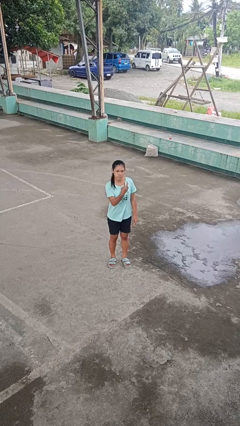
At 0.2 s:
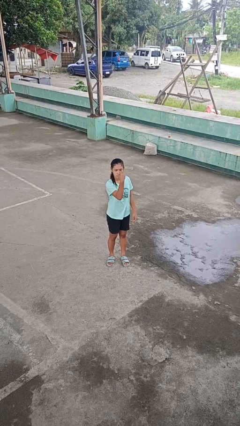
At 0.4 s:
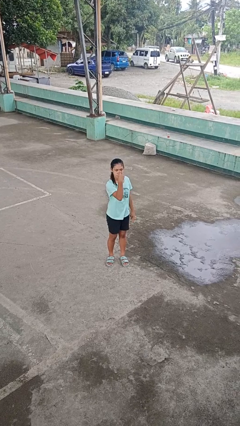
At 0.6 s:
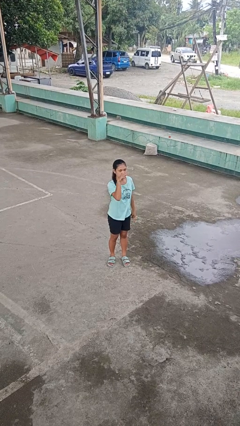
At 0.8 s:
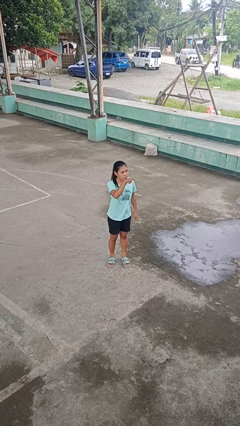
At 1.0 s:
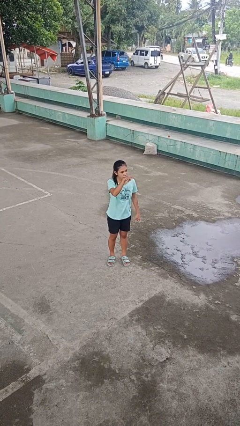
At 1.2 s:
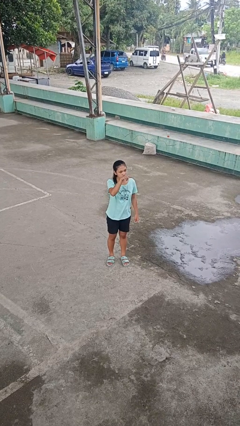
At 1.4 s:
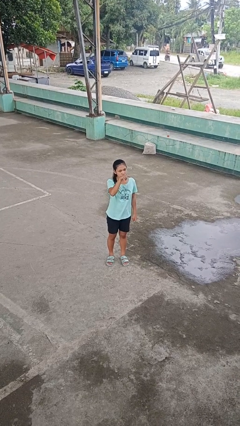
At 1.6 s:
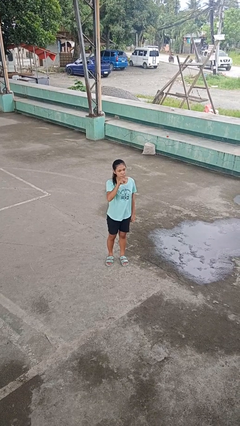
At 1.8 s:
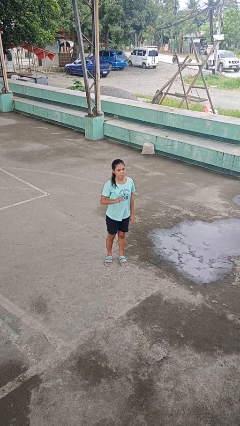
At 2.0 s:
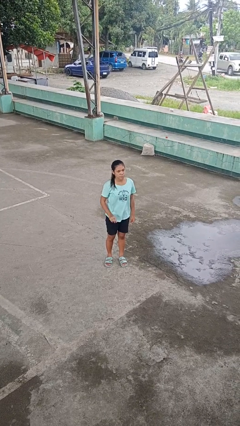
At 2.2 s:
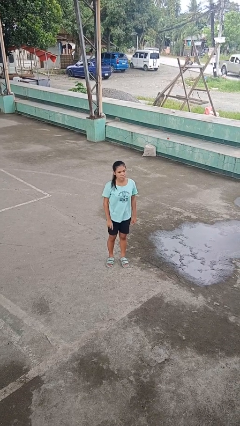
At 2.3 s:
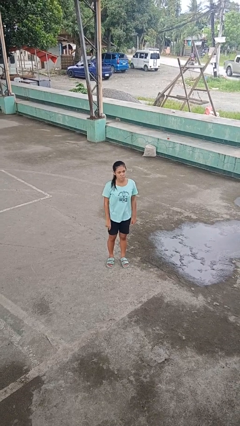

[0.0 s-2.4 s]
person gestures watch closely

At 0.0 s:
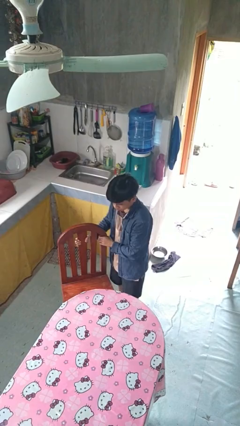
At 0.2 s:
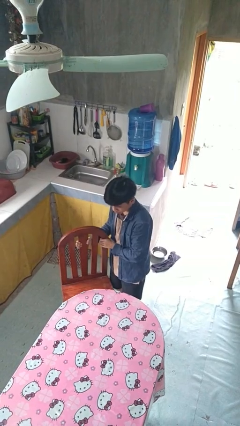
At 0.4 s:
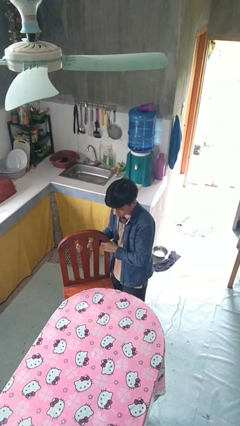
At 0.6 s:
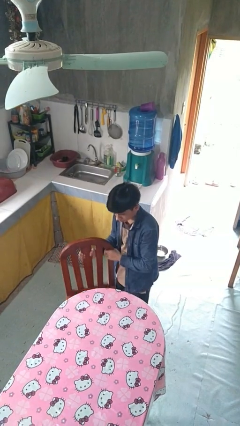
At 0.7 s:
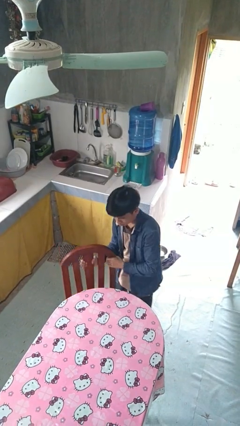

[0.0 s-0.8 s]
person pushes in chair

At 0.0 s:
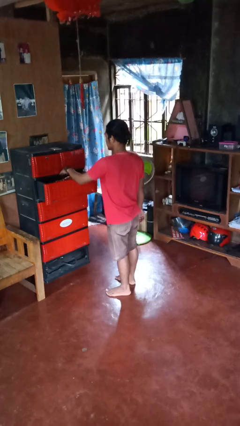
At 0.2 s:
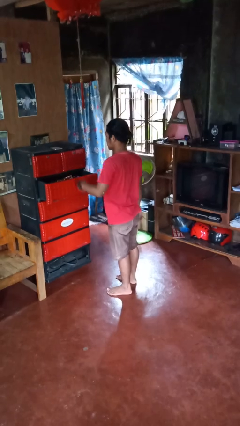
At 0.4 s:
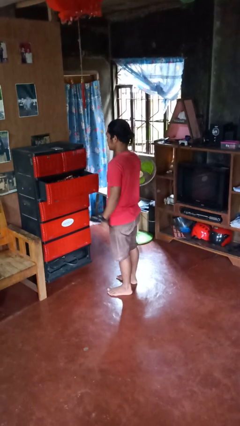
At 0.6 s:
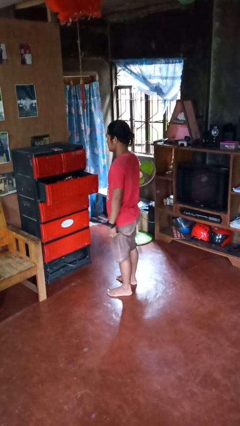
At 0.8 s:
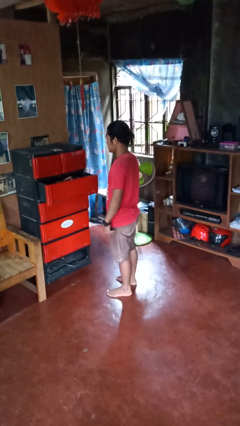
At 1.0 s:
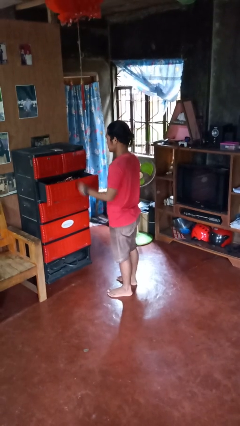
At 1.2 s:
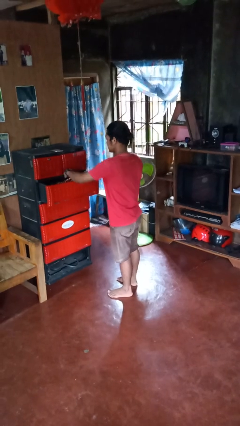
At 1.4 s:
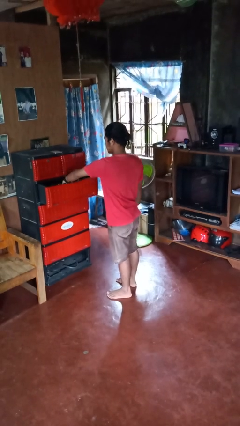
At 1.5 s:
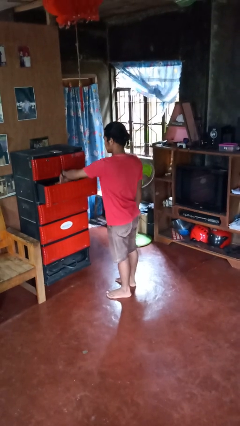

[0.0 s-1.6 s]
person puts clothes into dresser

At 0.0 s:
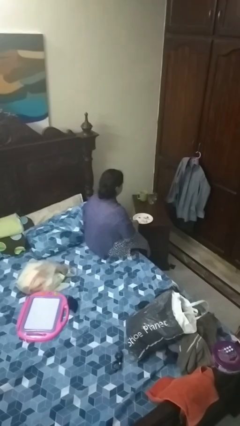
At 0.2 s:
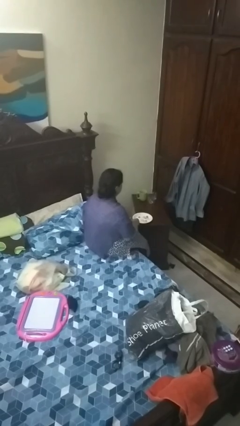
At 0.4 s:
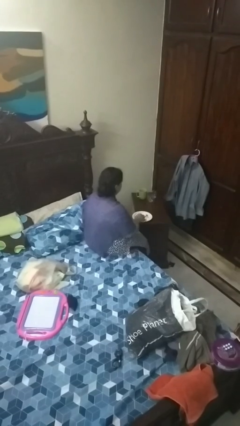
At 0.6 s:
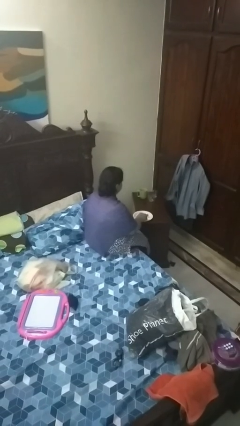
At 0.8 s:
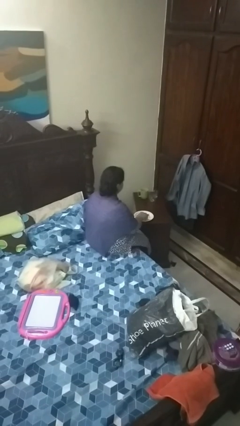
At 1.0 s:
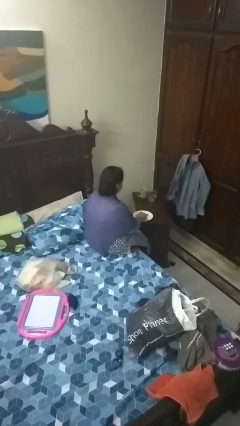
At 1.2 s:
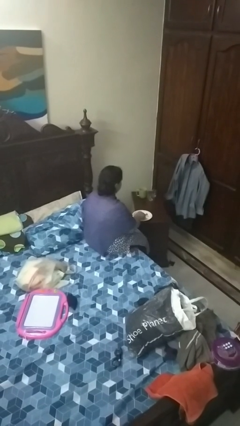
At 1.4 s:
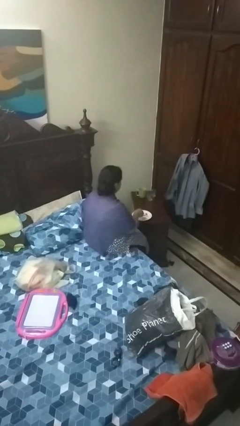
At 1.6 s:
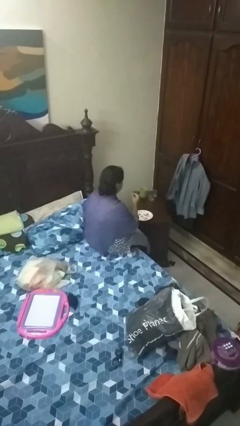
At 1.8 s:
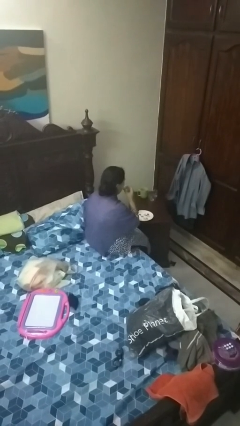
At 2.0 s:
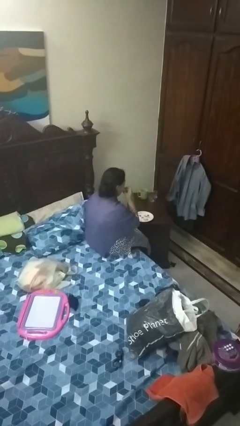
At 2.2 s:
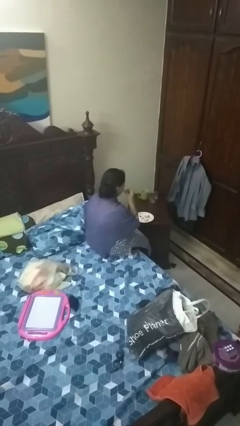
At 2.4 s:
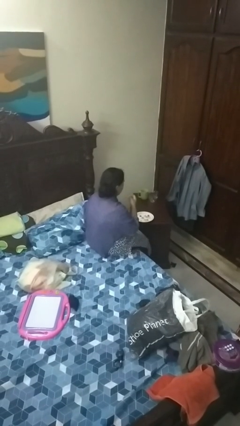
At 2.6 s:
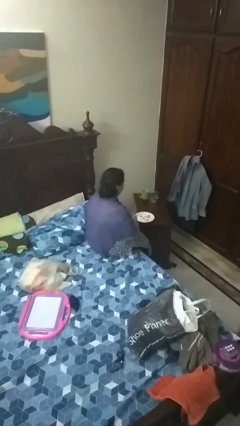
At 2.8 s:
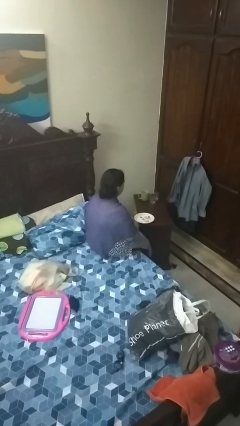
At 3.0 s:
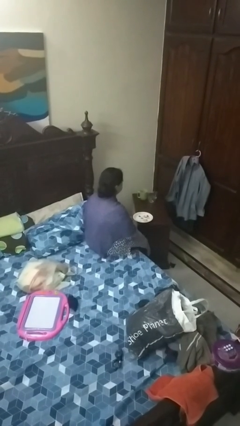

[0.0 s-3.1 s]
person eats with hands

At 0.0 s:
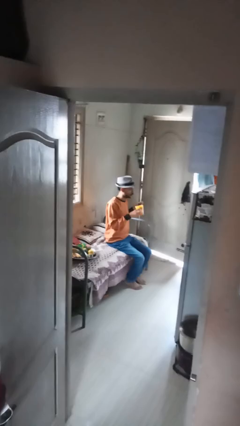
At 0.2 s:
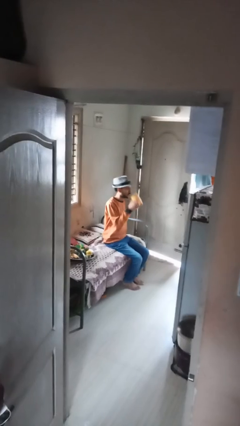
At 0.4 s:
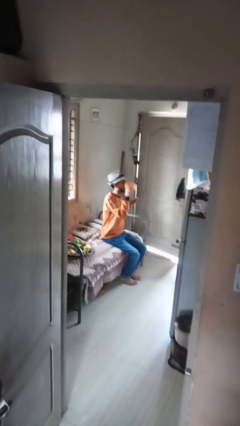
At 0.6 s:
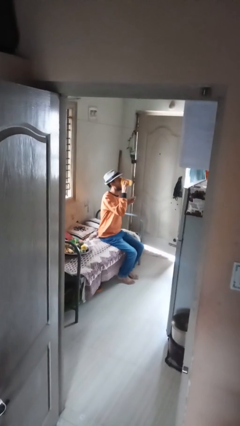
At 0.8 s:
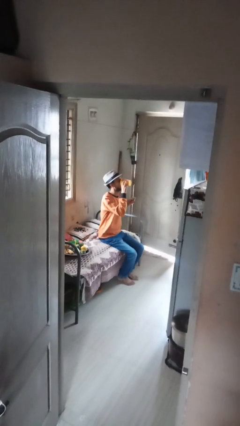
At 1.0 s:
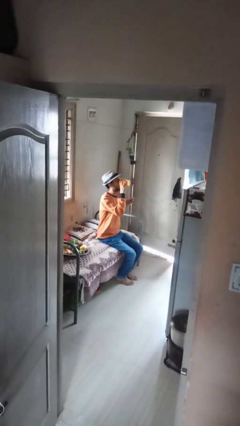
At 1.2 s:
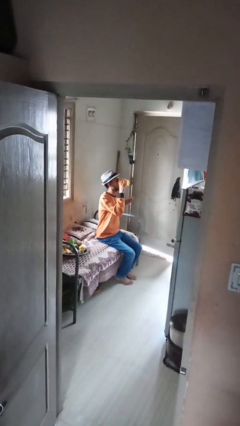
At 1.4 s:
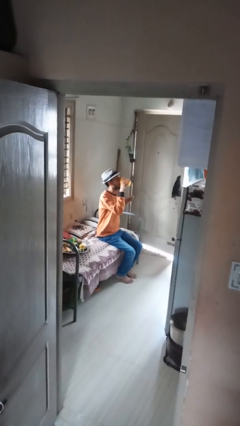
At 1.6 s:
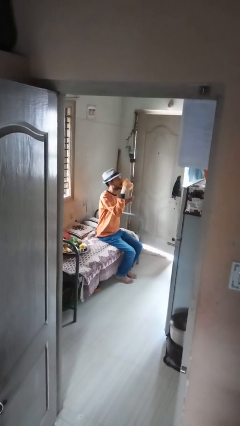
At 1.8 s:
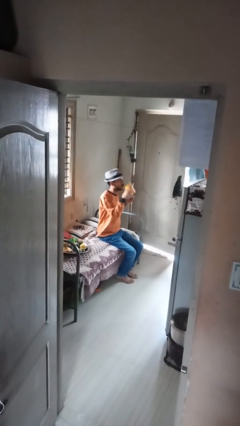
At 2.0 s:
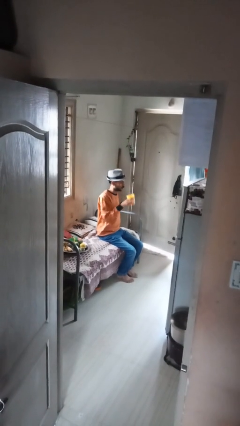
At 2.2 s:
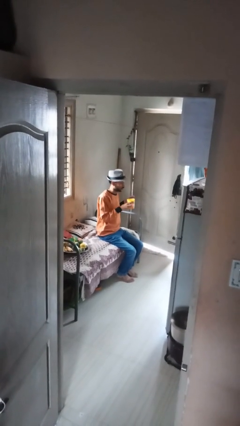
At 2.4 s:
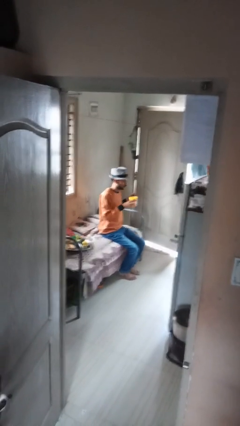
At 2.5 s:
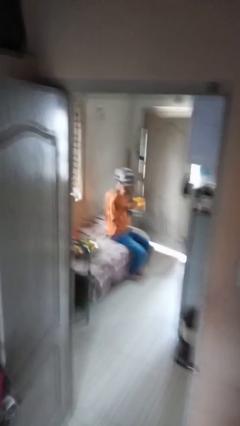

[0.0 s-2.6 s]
person drinks from mug

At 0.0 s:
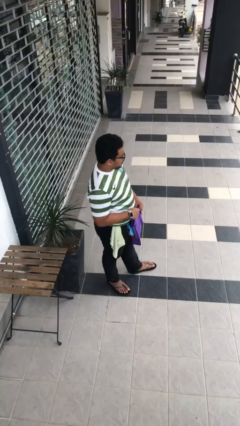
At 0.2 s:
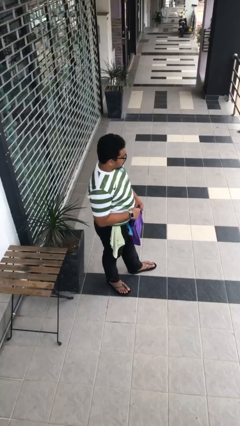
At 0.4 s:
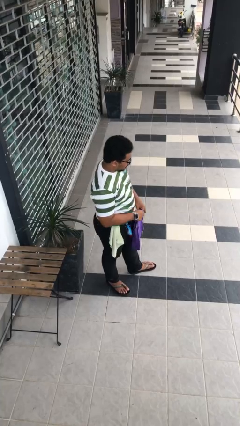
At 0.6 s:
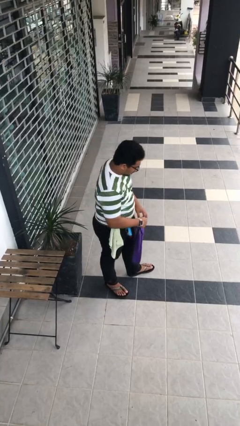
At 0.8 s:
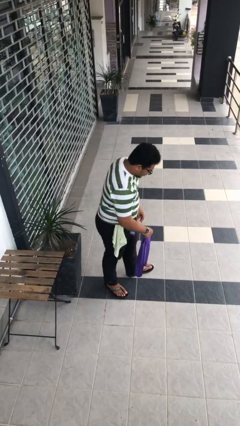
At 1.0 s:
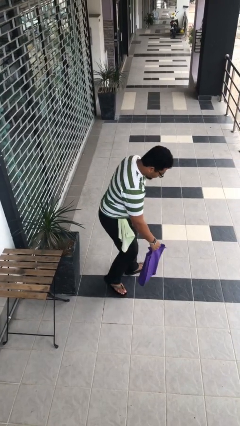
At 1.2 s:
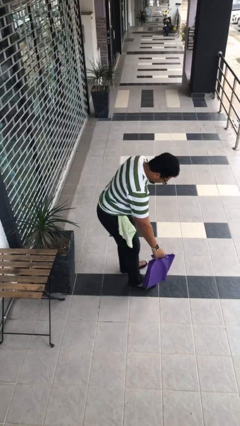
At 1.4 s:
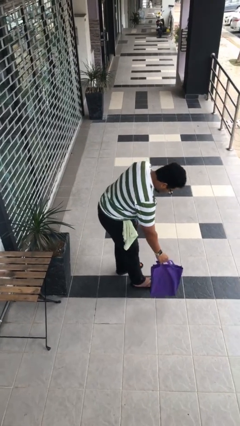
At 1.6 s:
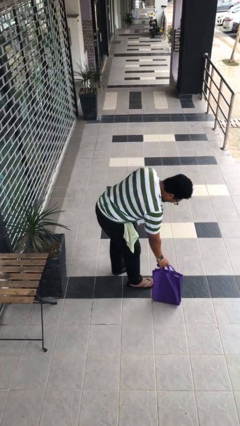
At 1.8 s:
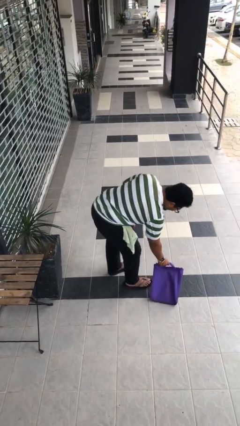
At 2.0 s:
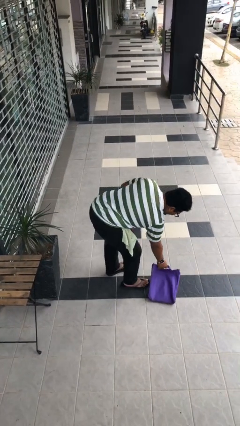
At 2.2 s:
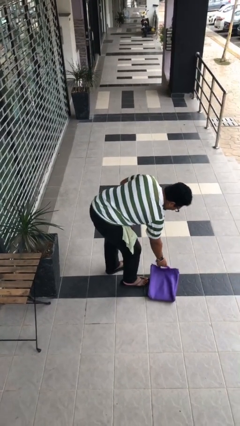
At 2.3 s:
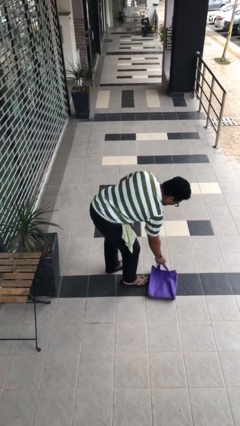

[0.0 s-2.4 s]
person puts down object on floor

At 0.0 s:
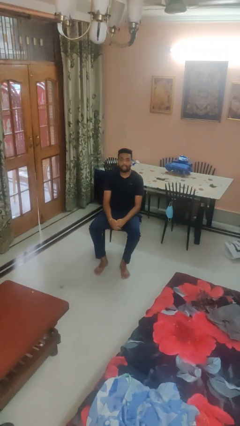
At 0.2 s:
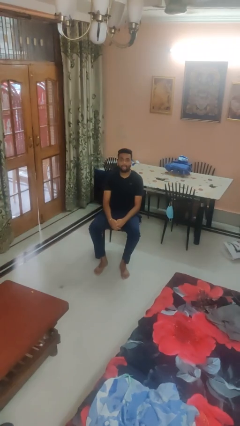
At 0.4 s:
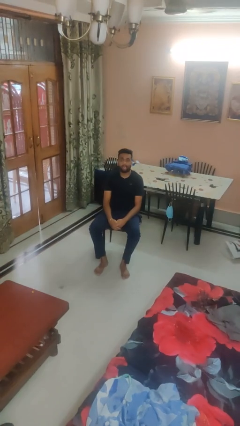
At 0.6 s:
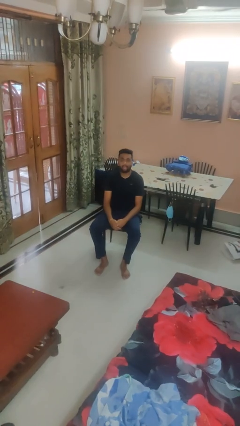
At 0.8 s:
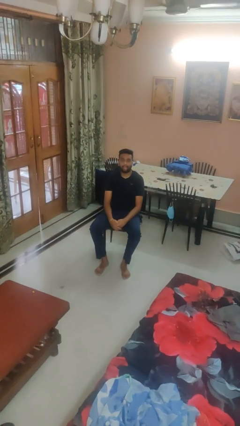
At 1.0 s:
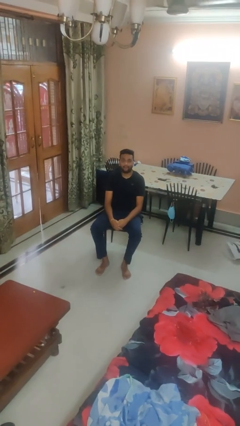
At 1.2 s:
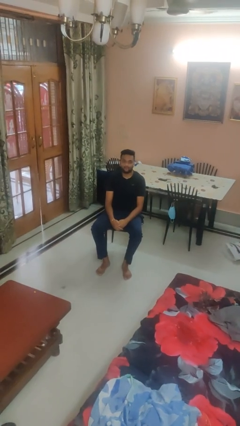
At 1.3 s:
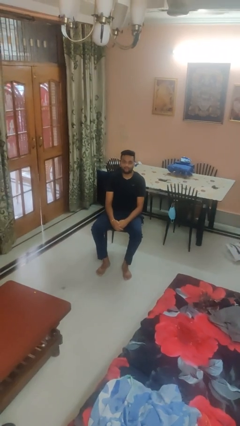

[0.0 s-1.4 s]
person sticks out tongue

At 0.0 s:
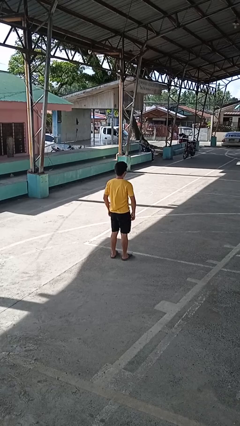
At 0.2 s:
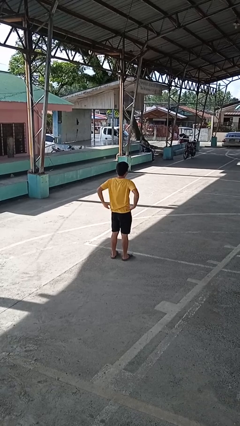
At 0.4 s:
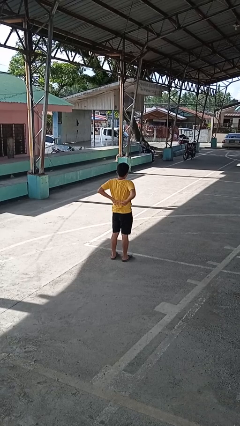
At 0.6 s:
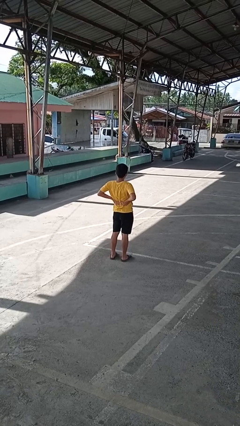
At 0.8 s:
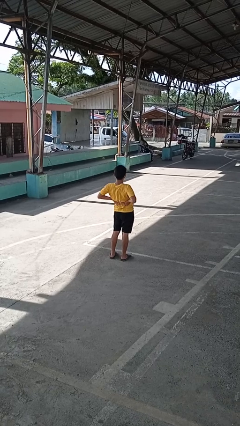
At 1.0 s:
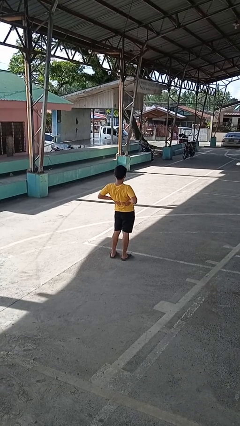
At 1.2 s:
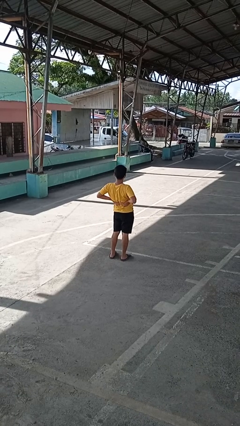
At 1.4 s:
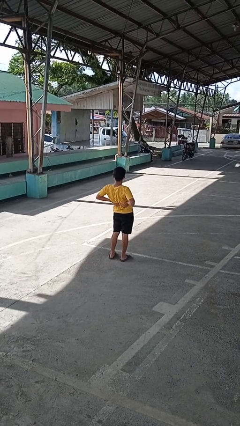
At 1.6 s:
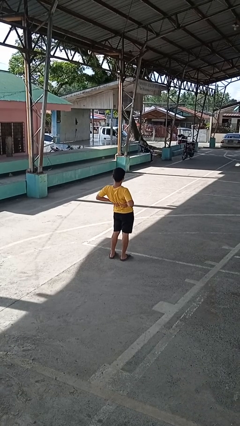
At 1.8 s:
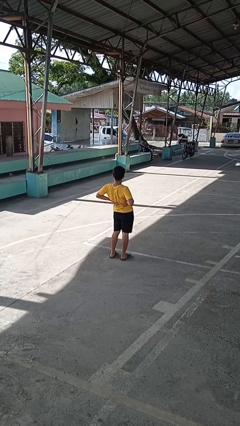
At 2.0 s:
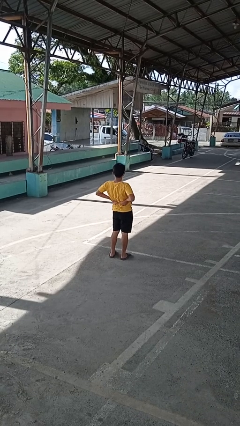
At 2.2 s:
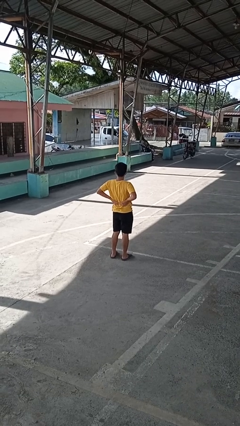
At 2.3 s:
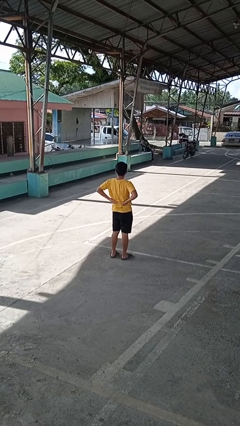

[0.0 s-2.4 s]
person stretches back

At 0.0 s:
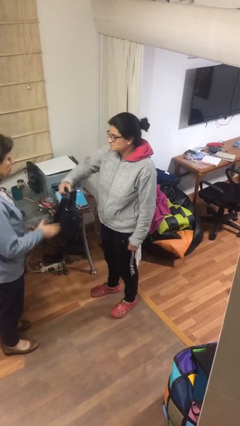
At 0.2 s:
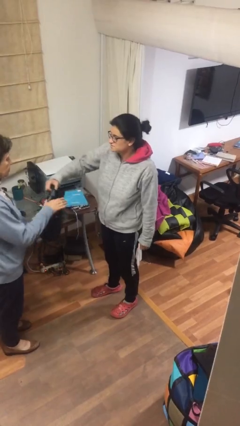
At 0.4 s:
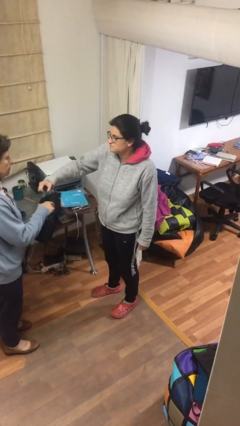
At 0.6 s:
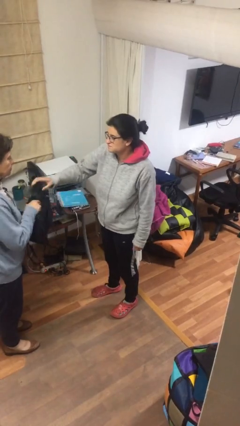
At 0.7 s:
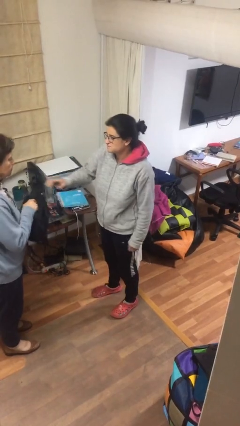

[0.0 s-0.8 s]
person transfers object to person
